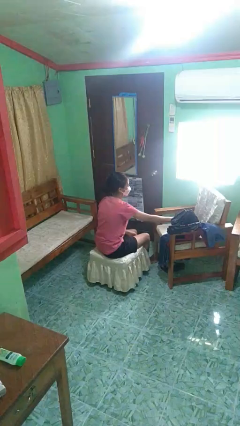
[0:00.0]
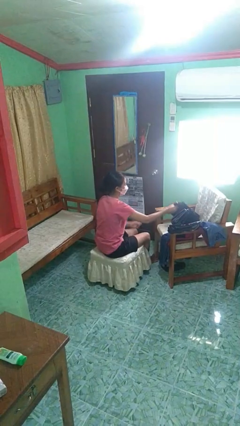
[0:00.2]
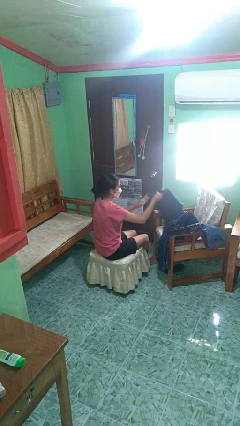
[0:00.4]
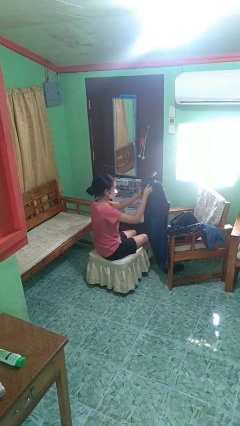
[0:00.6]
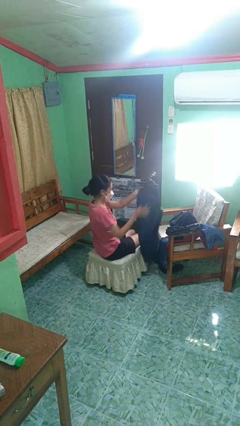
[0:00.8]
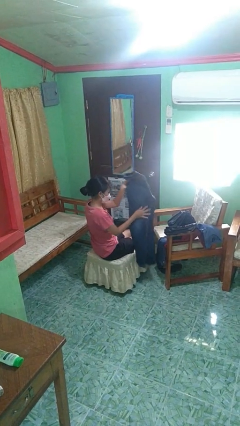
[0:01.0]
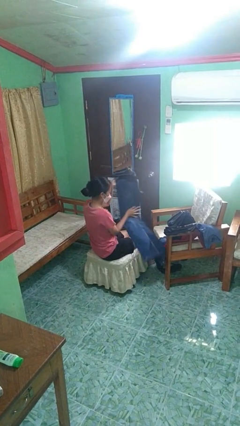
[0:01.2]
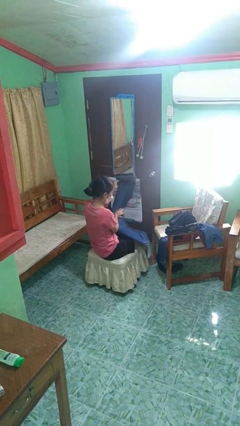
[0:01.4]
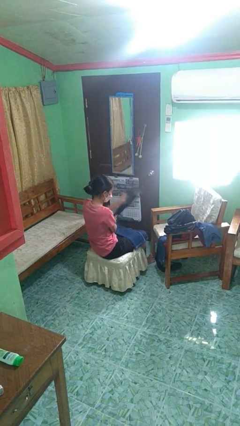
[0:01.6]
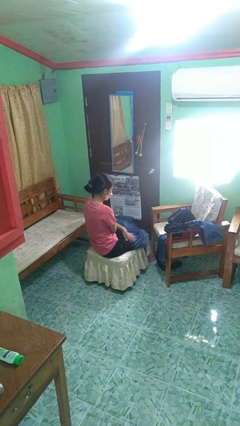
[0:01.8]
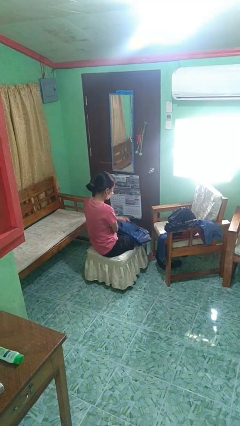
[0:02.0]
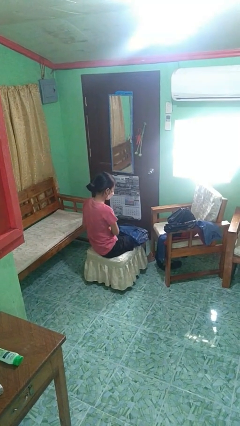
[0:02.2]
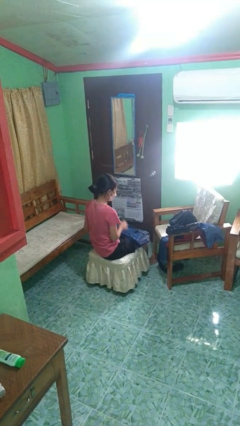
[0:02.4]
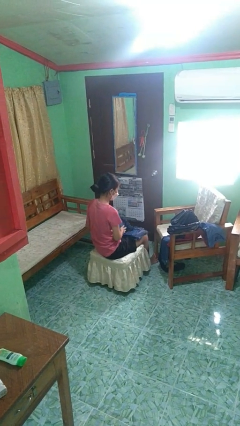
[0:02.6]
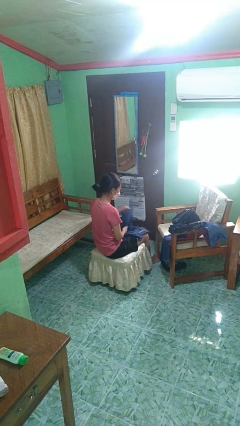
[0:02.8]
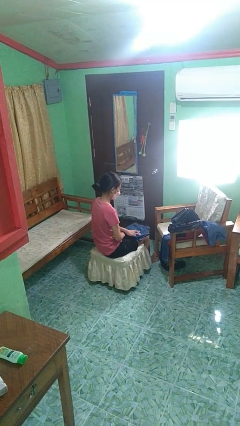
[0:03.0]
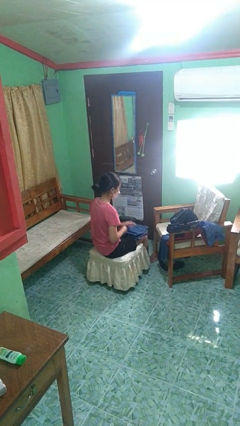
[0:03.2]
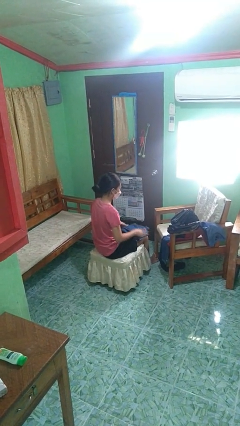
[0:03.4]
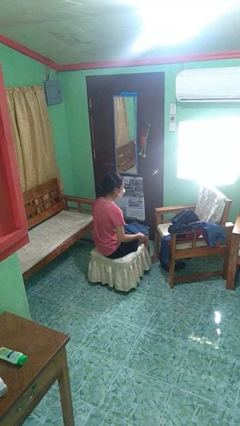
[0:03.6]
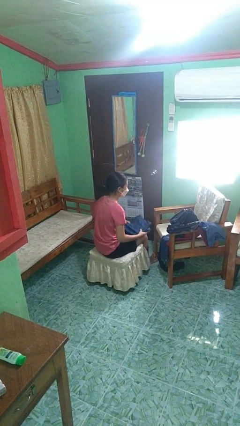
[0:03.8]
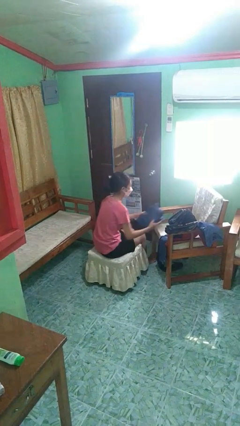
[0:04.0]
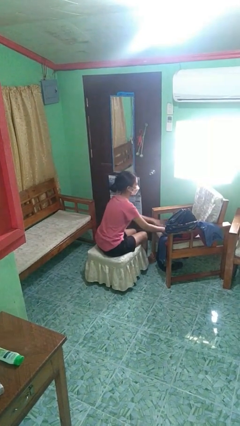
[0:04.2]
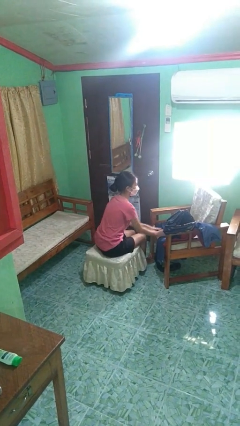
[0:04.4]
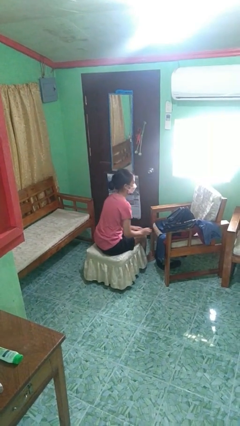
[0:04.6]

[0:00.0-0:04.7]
person folds pants

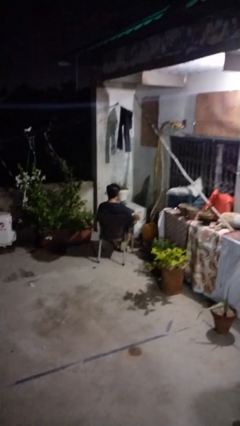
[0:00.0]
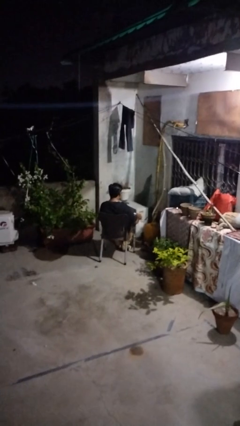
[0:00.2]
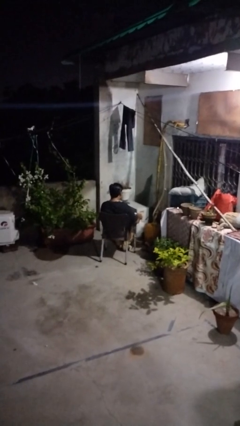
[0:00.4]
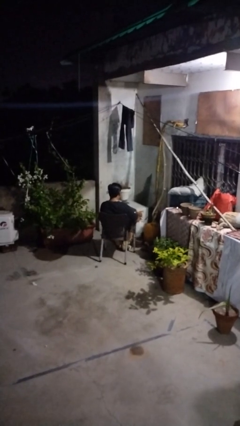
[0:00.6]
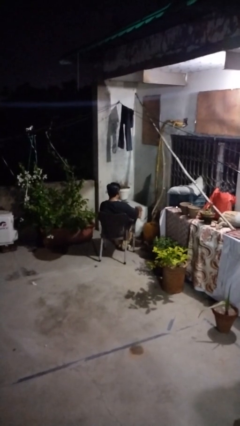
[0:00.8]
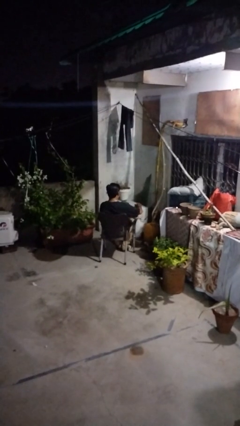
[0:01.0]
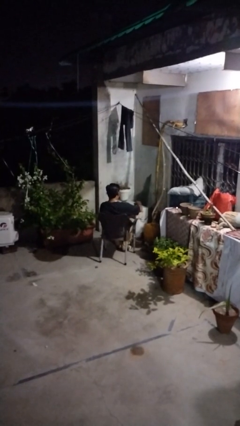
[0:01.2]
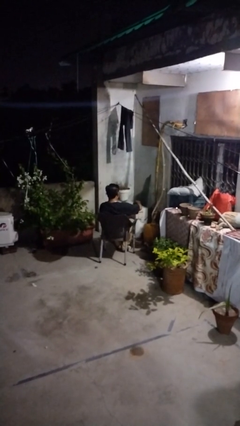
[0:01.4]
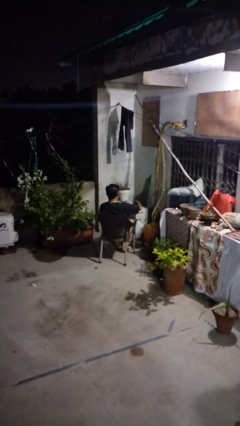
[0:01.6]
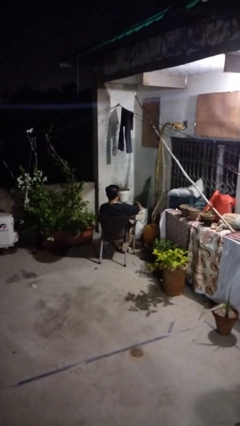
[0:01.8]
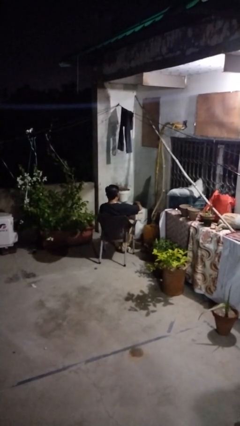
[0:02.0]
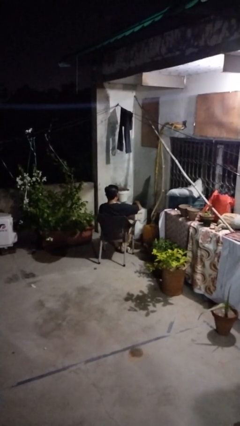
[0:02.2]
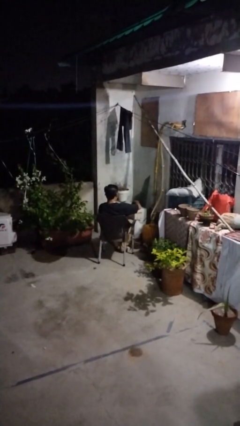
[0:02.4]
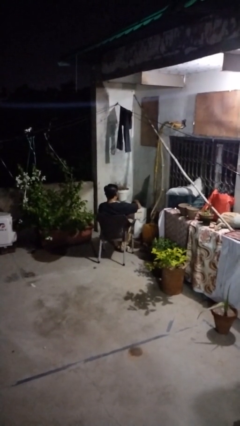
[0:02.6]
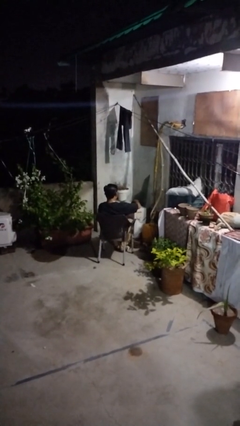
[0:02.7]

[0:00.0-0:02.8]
person pours coffee into mug

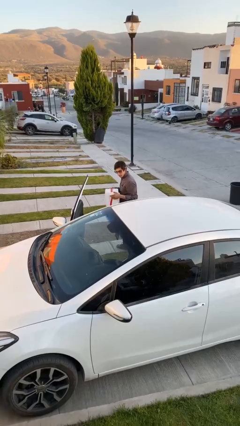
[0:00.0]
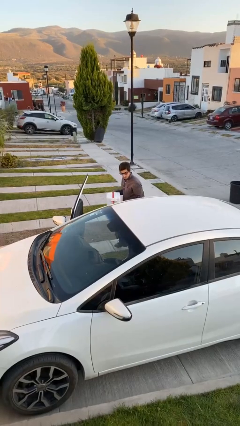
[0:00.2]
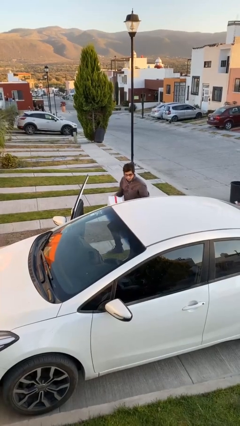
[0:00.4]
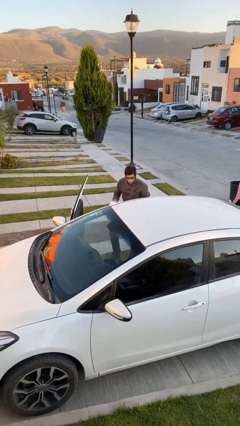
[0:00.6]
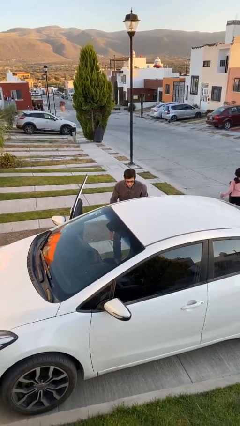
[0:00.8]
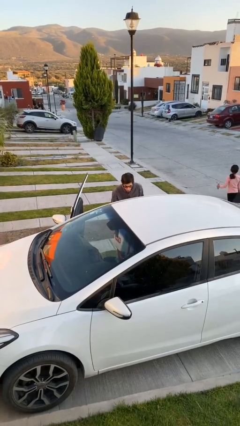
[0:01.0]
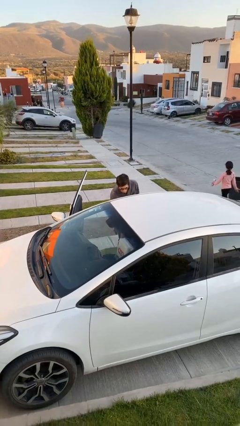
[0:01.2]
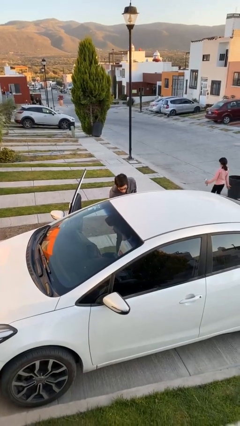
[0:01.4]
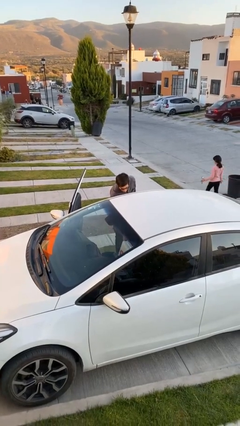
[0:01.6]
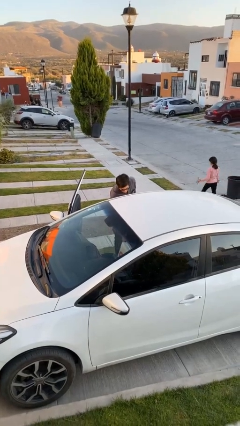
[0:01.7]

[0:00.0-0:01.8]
person loads car

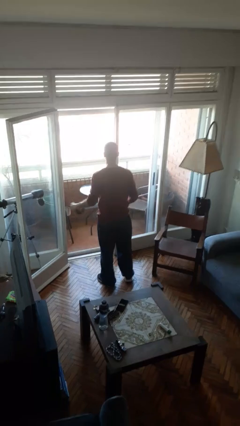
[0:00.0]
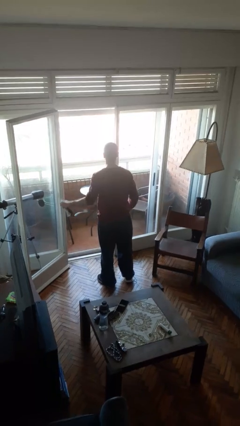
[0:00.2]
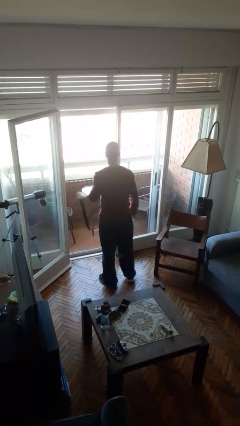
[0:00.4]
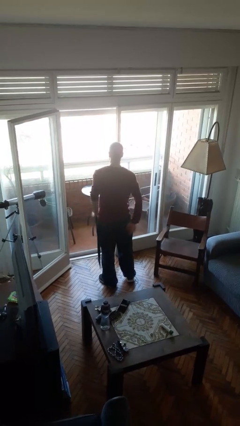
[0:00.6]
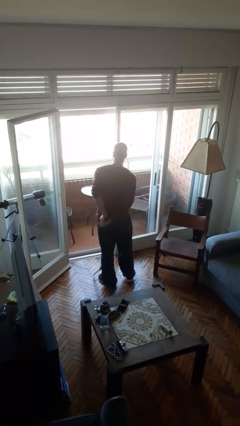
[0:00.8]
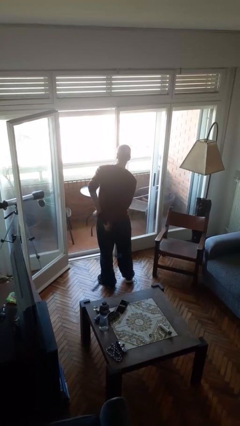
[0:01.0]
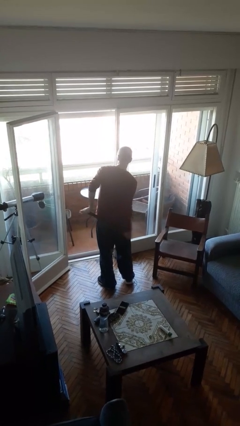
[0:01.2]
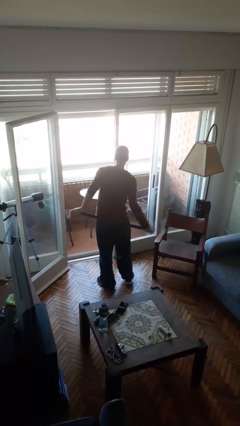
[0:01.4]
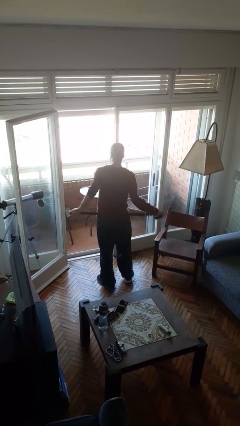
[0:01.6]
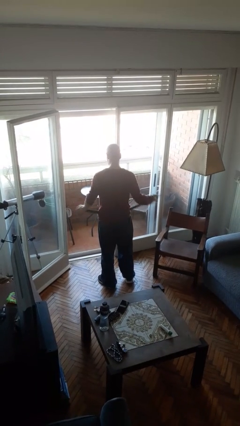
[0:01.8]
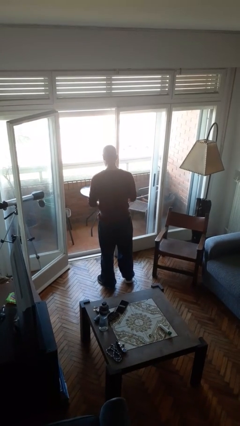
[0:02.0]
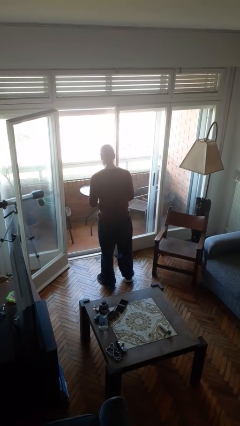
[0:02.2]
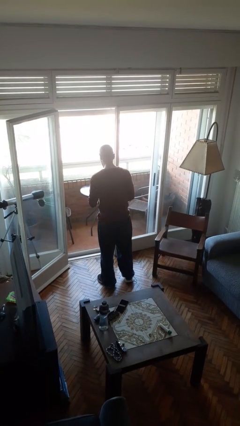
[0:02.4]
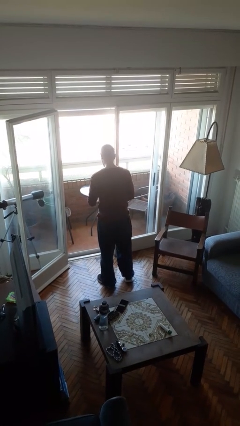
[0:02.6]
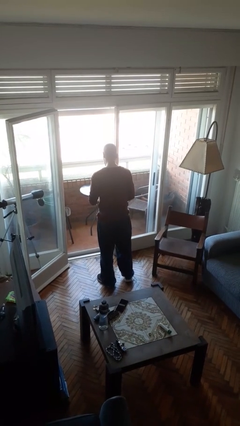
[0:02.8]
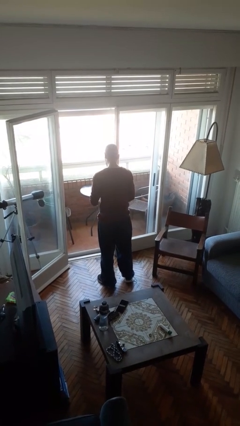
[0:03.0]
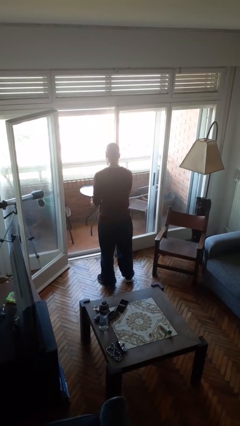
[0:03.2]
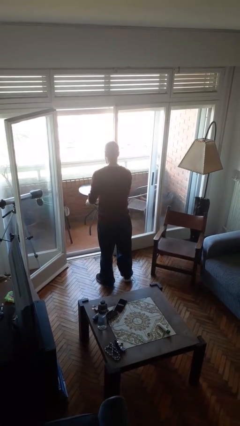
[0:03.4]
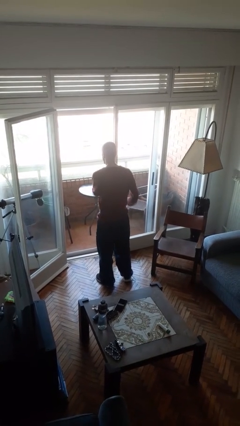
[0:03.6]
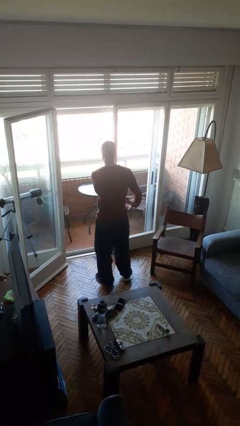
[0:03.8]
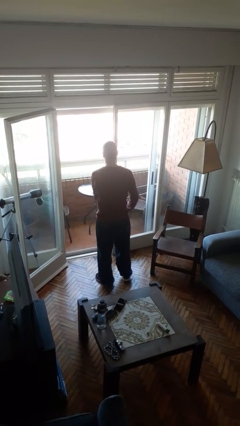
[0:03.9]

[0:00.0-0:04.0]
person puts on belt

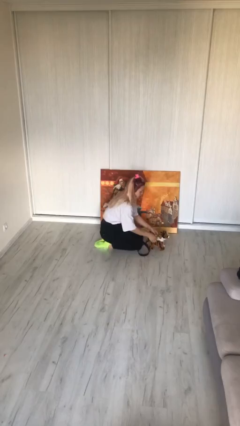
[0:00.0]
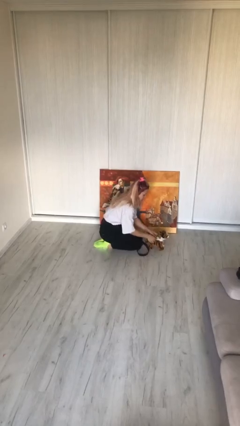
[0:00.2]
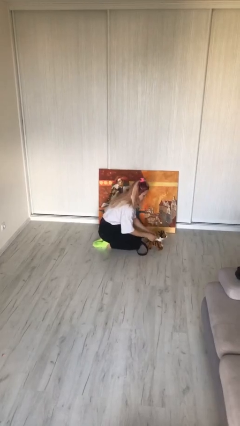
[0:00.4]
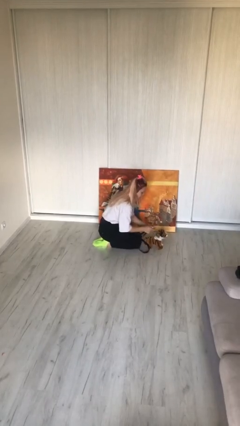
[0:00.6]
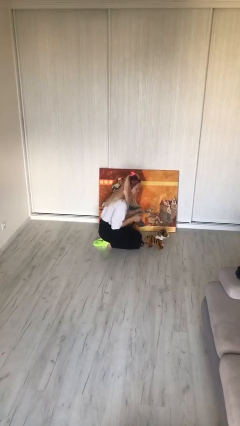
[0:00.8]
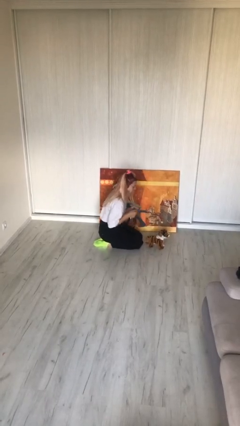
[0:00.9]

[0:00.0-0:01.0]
person unattaches leash from dog

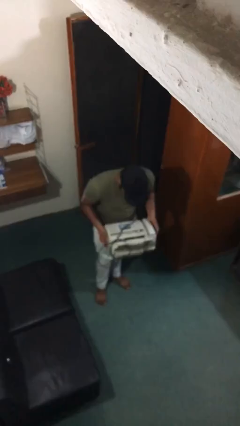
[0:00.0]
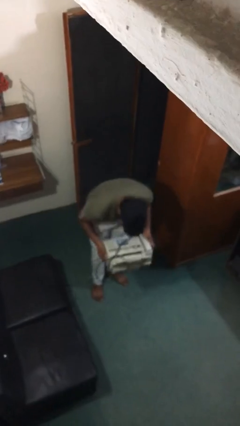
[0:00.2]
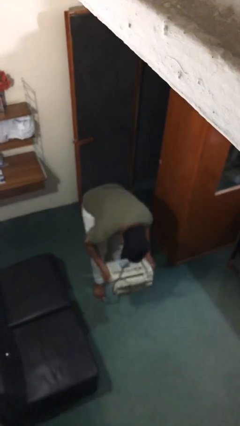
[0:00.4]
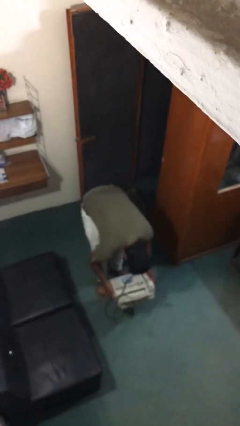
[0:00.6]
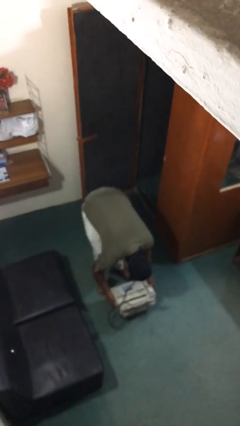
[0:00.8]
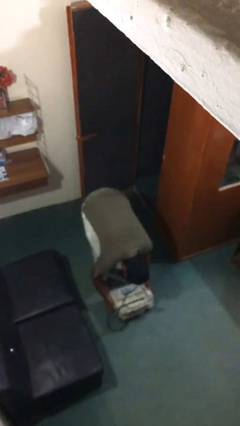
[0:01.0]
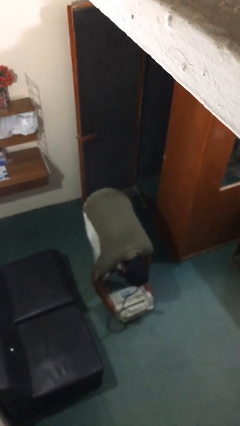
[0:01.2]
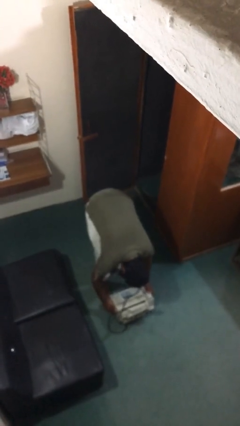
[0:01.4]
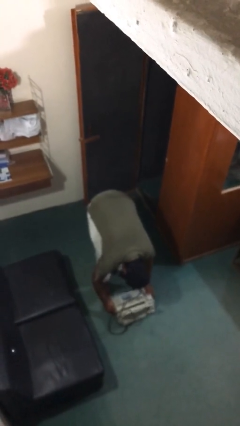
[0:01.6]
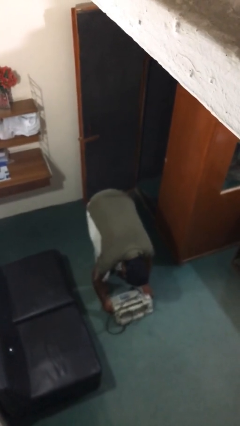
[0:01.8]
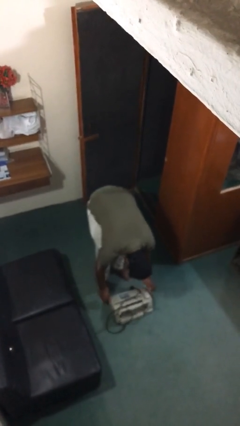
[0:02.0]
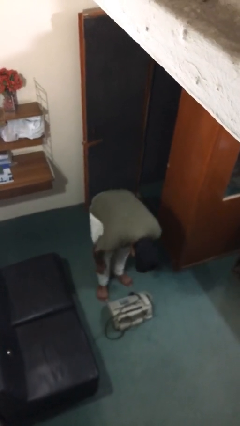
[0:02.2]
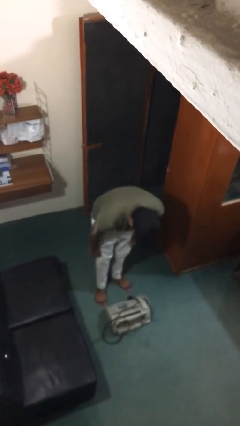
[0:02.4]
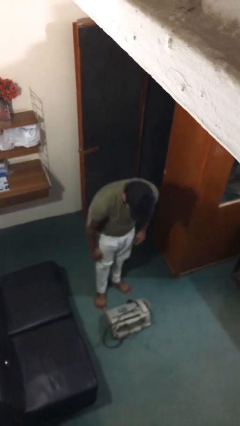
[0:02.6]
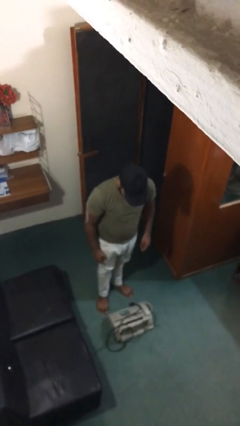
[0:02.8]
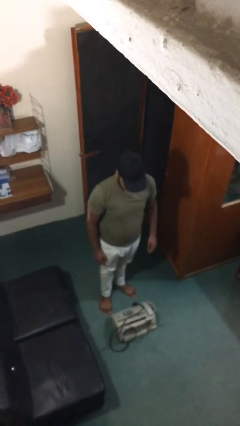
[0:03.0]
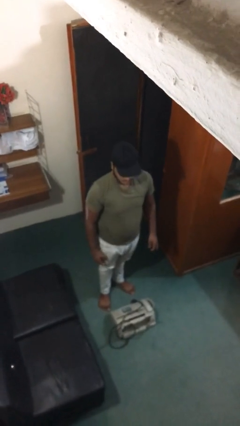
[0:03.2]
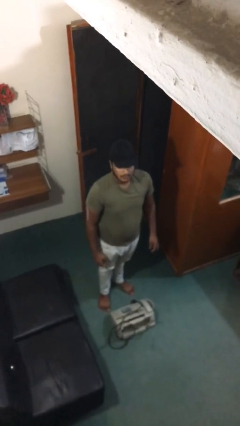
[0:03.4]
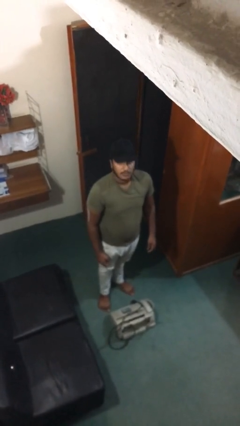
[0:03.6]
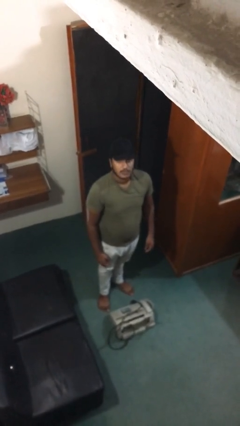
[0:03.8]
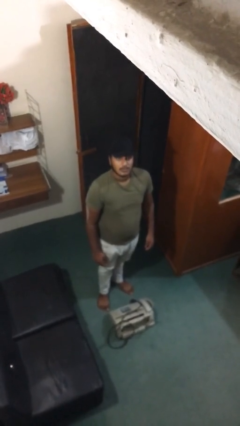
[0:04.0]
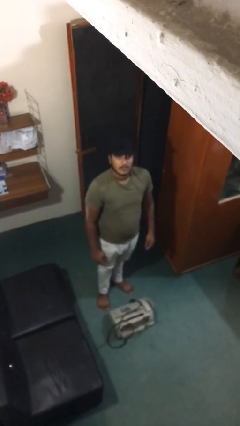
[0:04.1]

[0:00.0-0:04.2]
person puts down object on floor
